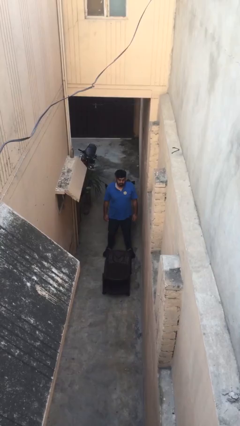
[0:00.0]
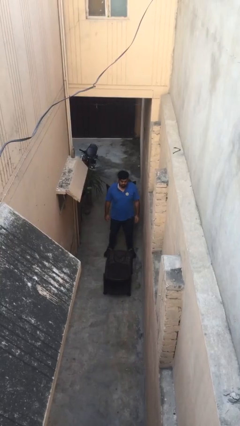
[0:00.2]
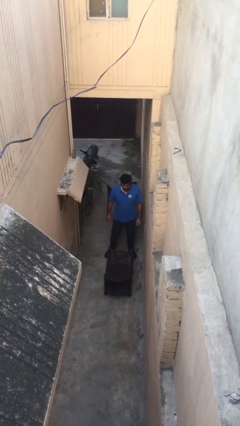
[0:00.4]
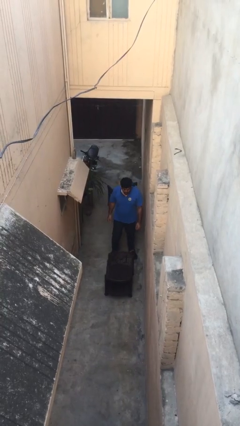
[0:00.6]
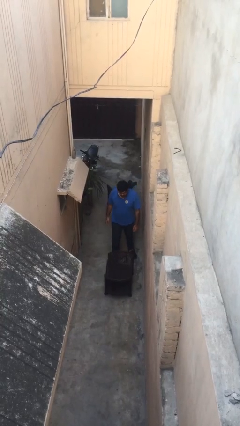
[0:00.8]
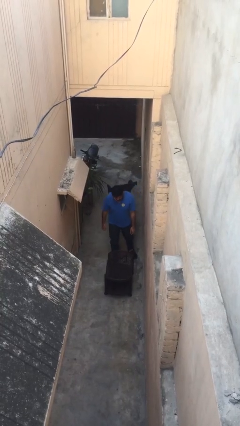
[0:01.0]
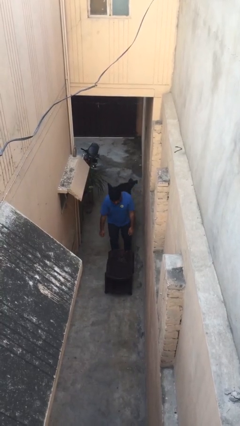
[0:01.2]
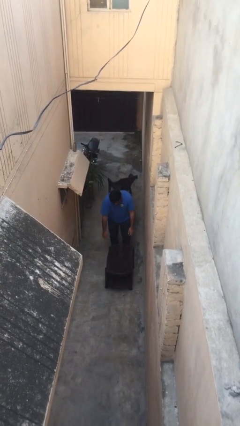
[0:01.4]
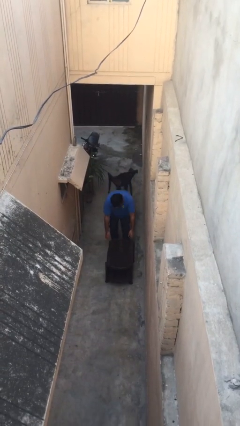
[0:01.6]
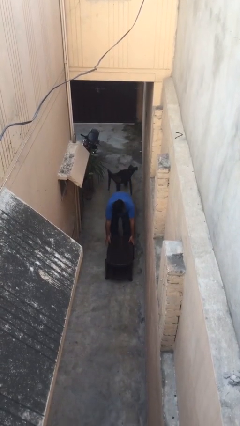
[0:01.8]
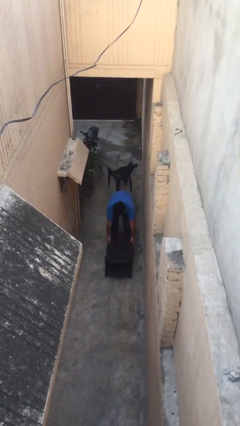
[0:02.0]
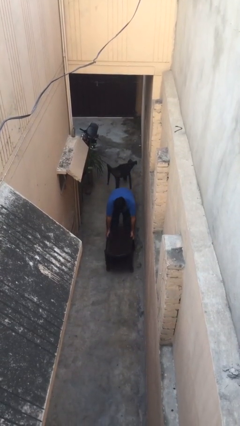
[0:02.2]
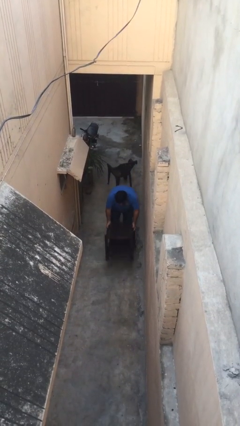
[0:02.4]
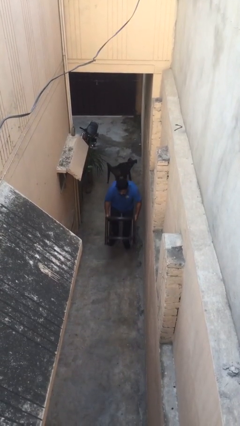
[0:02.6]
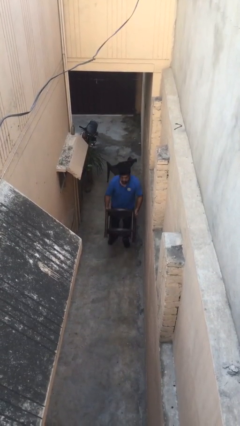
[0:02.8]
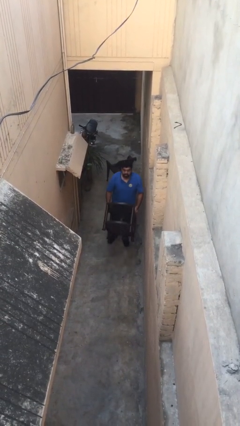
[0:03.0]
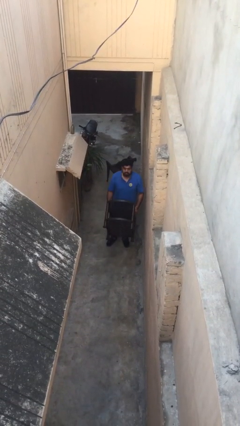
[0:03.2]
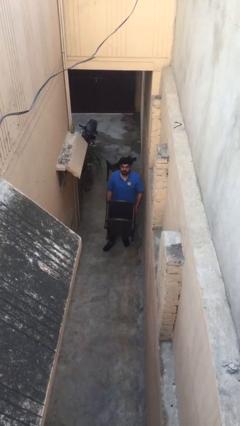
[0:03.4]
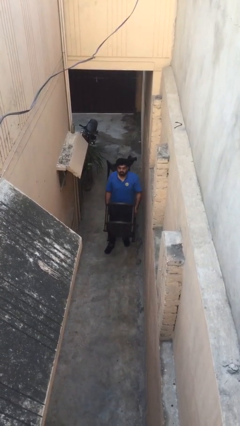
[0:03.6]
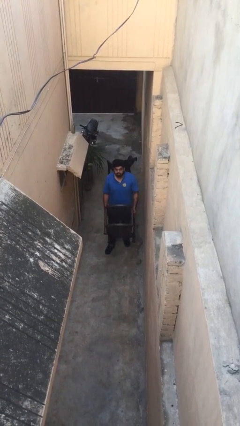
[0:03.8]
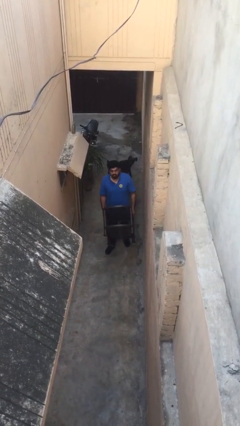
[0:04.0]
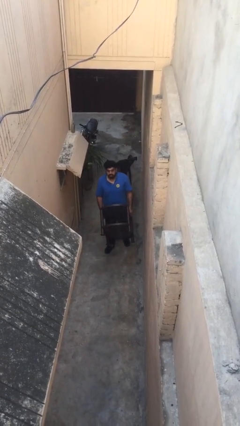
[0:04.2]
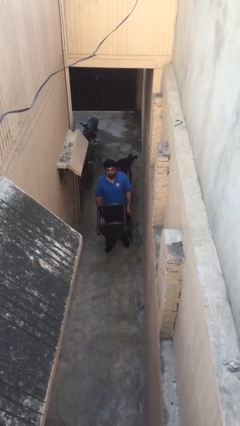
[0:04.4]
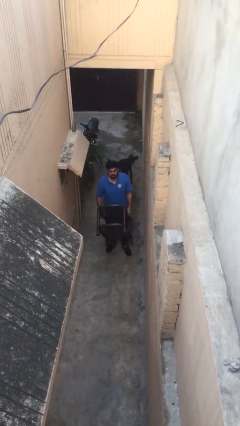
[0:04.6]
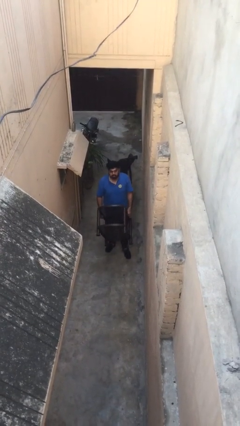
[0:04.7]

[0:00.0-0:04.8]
person picks up object from floor

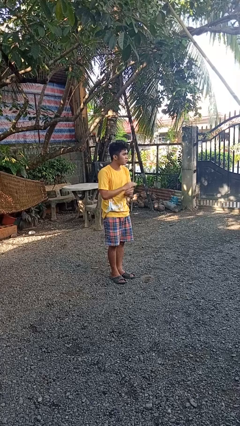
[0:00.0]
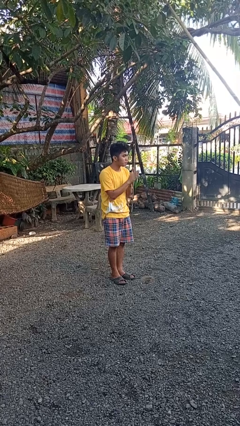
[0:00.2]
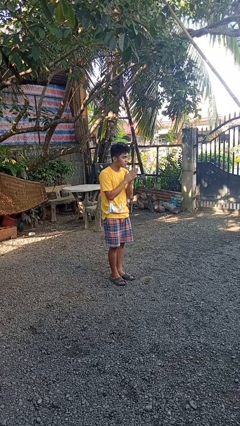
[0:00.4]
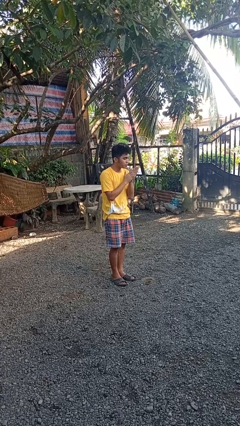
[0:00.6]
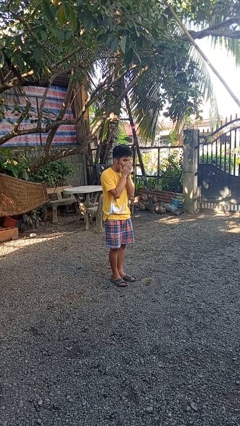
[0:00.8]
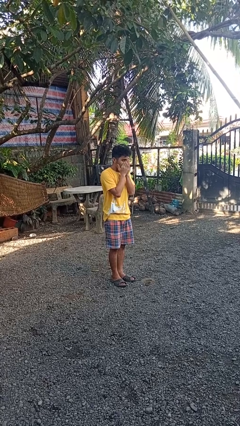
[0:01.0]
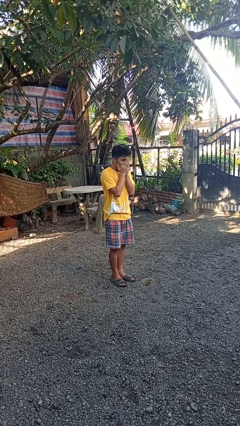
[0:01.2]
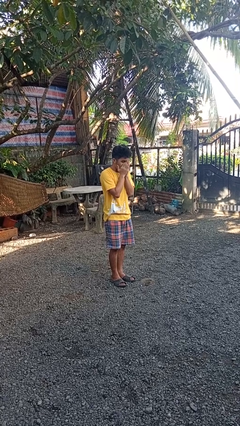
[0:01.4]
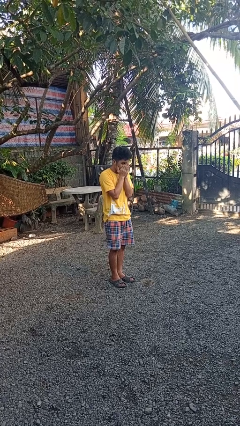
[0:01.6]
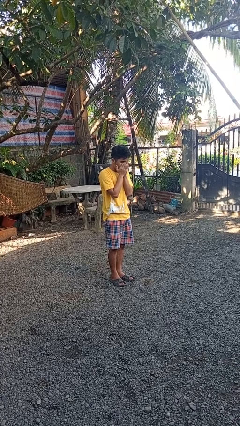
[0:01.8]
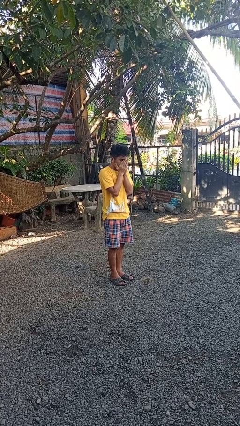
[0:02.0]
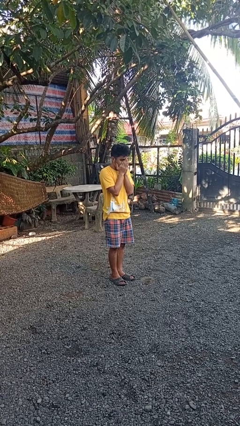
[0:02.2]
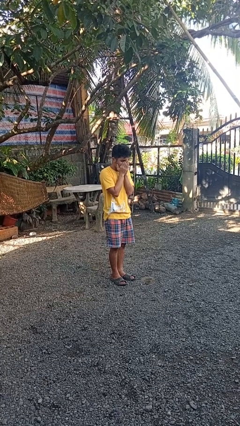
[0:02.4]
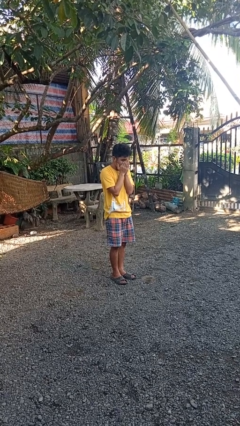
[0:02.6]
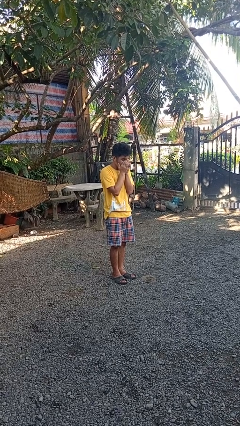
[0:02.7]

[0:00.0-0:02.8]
person blows into hands

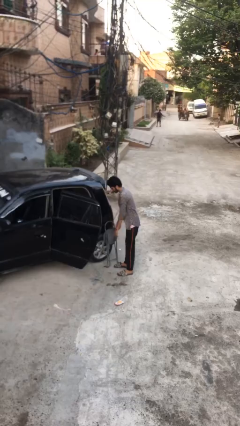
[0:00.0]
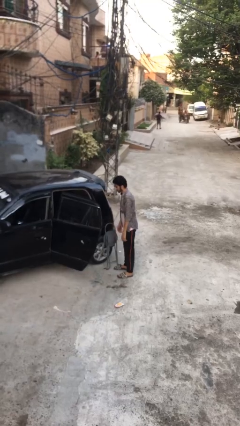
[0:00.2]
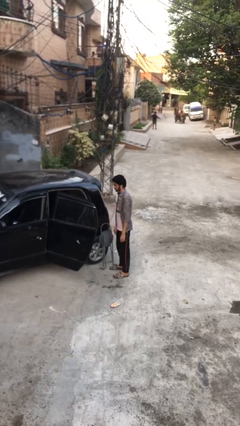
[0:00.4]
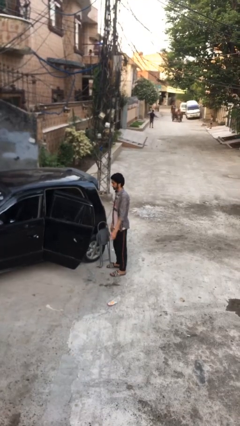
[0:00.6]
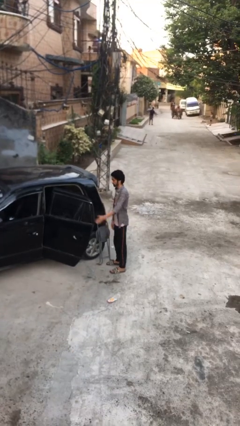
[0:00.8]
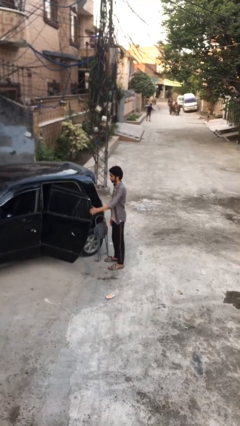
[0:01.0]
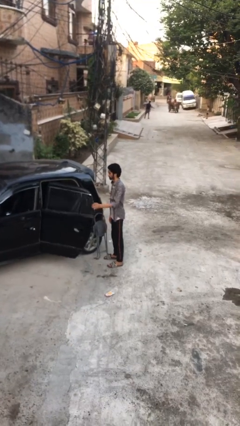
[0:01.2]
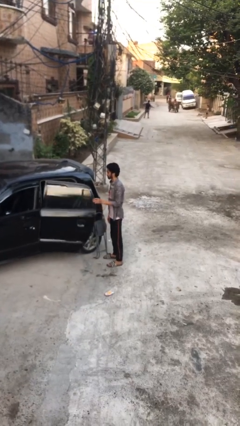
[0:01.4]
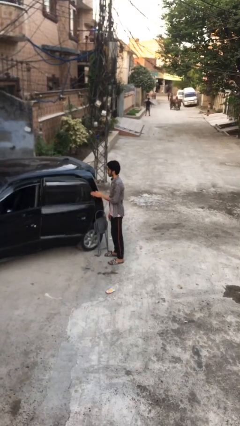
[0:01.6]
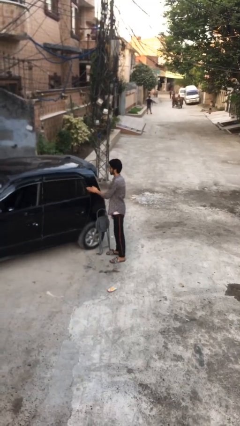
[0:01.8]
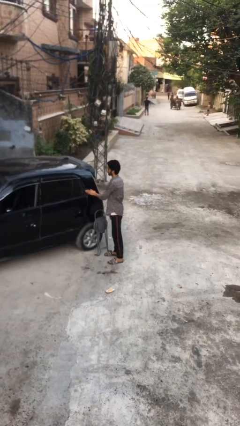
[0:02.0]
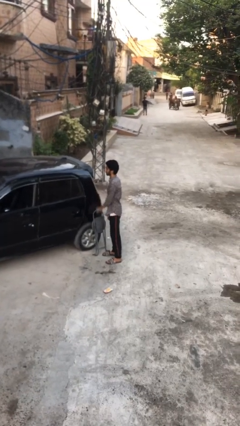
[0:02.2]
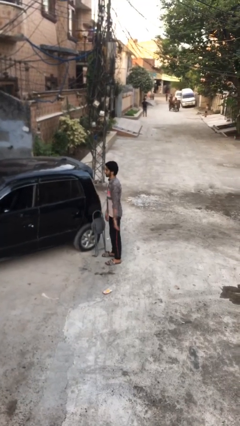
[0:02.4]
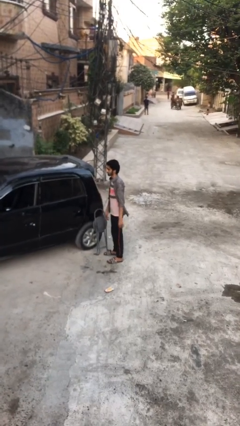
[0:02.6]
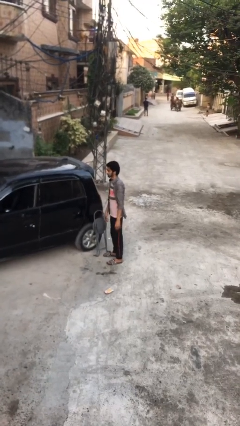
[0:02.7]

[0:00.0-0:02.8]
person closes car door

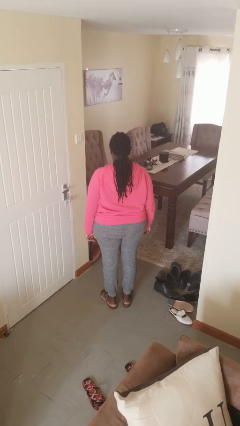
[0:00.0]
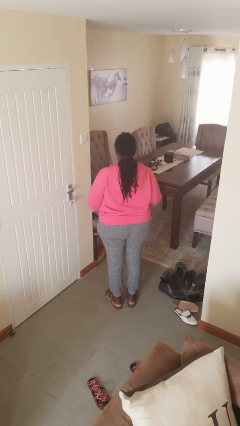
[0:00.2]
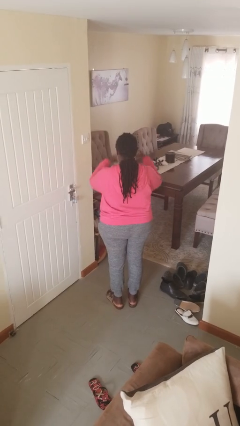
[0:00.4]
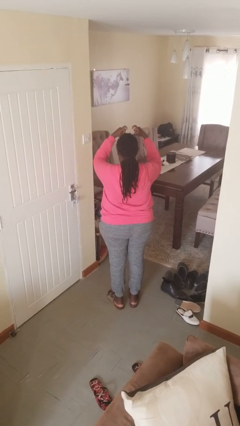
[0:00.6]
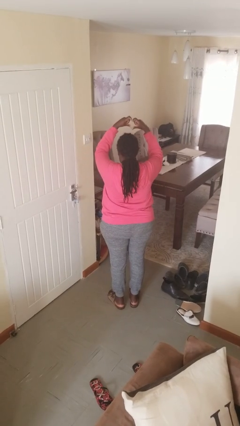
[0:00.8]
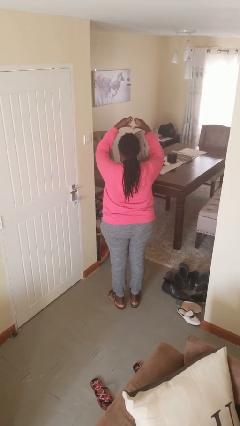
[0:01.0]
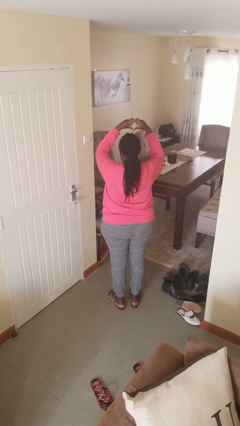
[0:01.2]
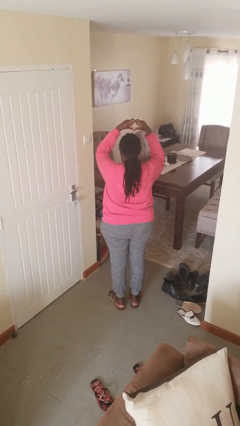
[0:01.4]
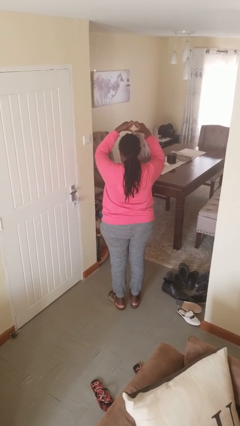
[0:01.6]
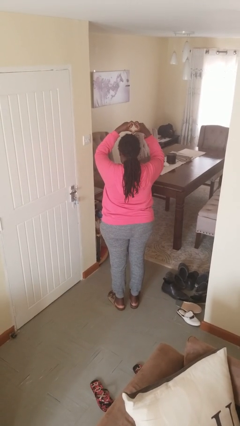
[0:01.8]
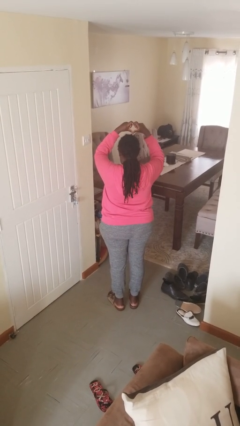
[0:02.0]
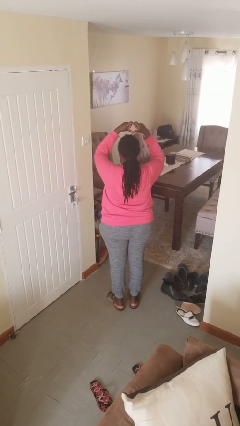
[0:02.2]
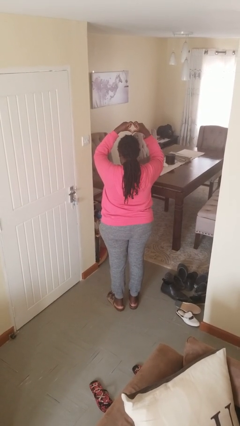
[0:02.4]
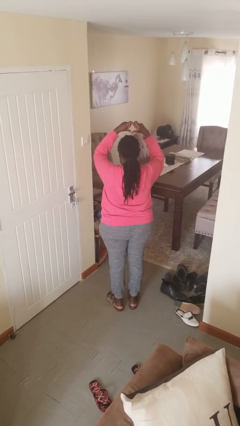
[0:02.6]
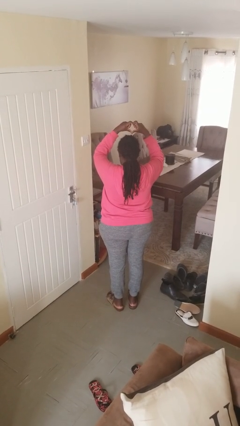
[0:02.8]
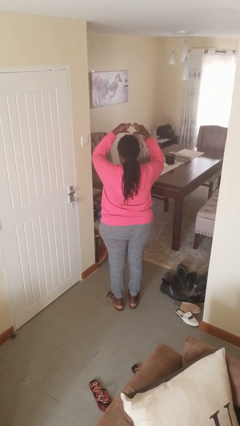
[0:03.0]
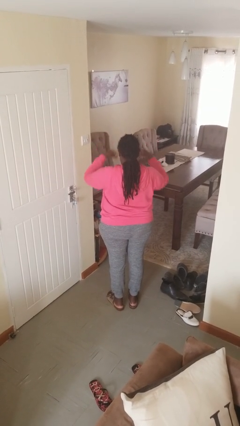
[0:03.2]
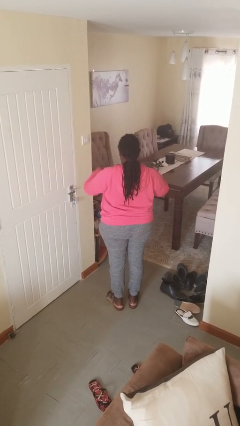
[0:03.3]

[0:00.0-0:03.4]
person gestures heart

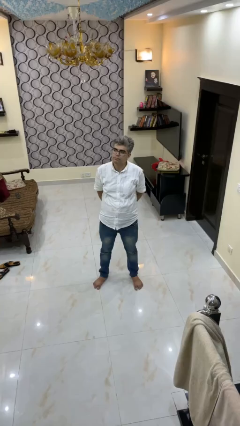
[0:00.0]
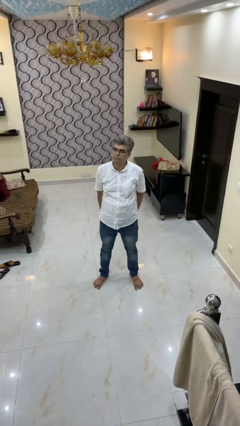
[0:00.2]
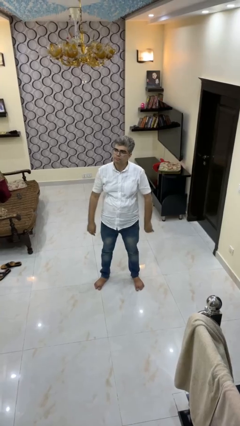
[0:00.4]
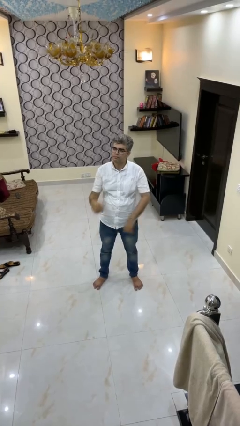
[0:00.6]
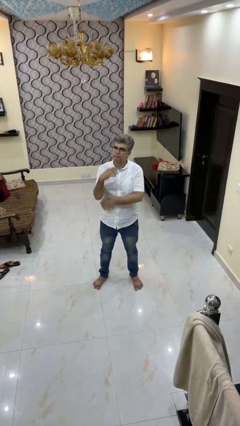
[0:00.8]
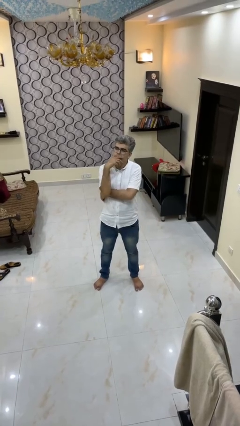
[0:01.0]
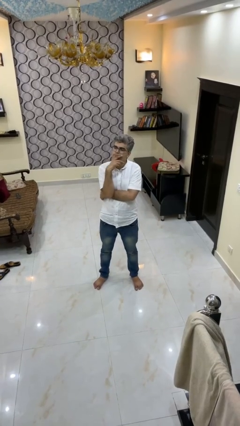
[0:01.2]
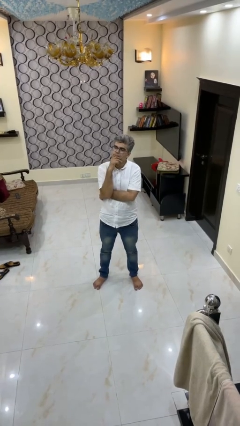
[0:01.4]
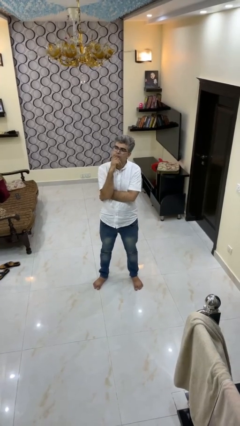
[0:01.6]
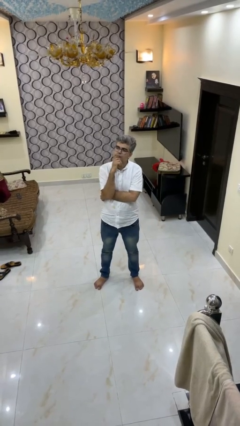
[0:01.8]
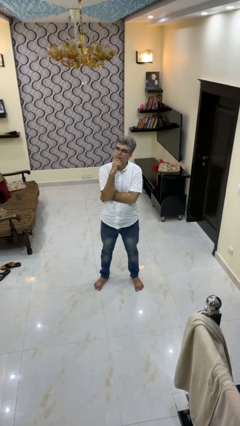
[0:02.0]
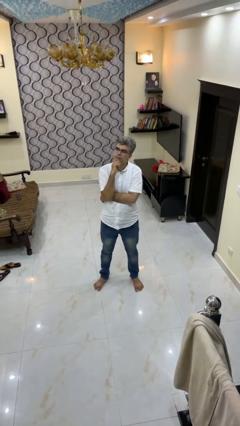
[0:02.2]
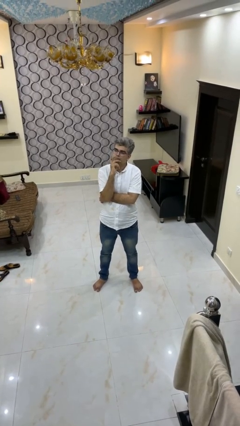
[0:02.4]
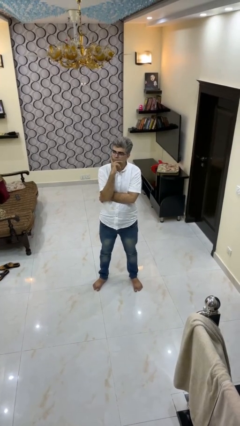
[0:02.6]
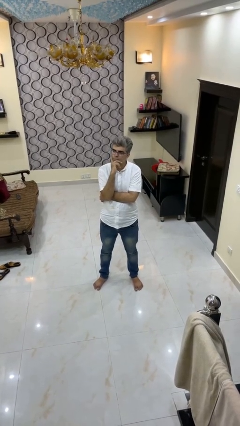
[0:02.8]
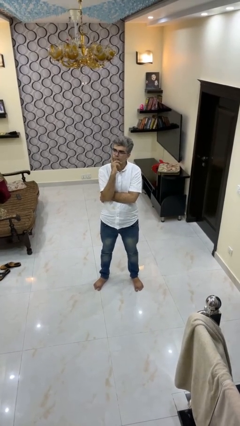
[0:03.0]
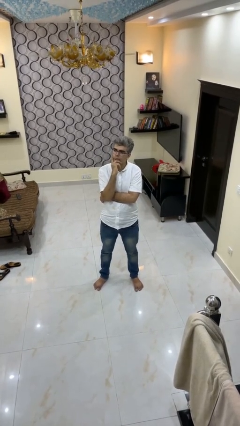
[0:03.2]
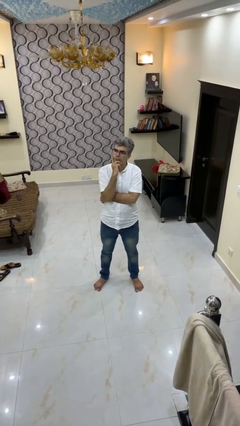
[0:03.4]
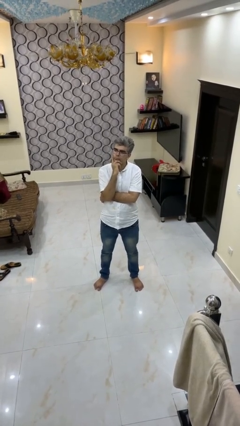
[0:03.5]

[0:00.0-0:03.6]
person strokes chin
